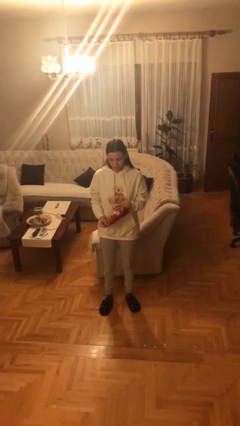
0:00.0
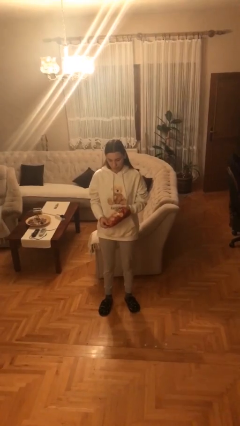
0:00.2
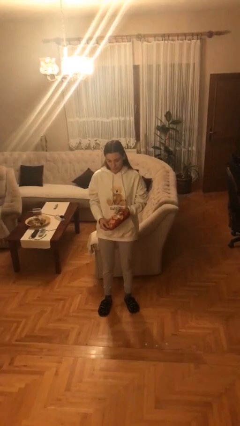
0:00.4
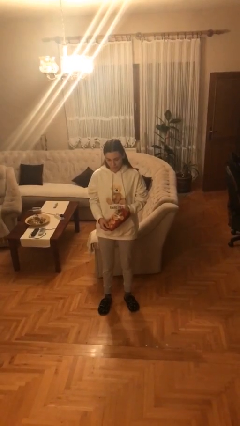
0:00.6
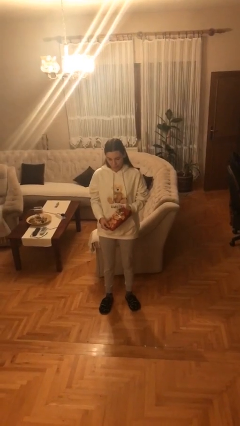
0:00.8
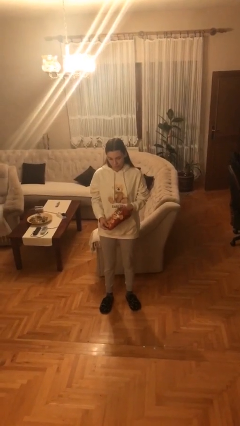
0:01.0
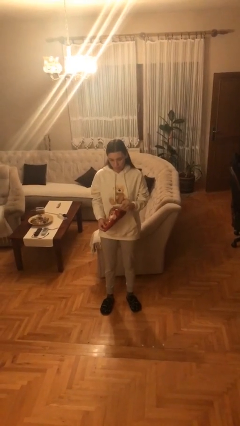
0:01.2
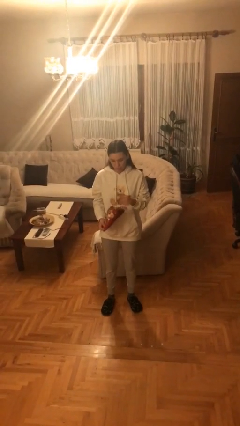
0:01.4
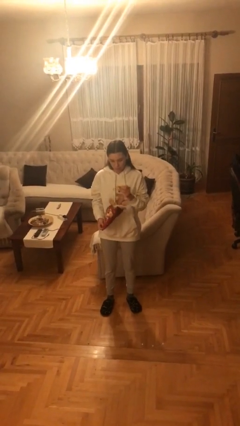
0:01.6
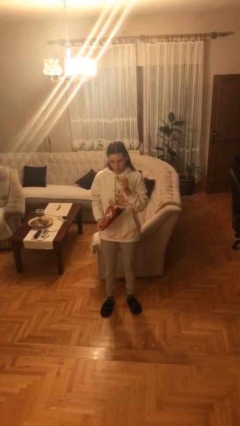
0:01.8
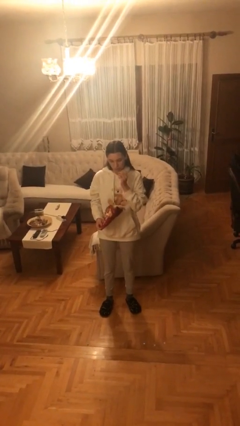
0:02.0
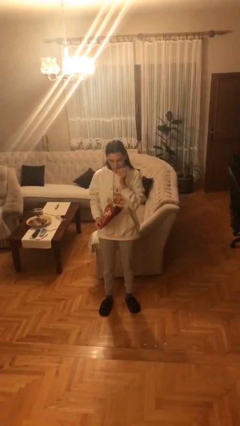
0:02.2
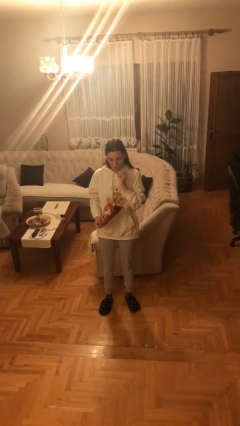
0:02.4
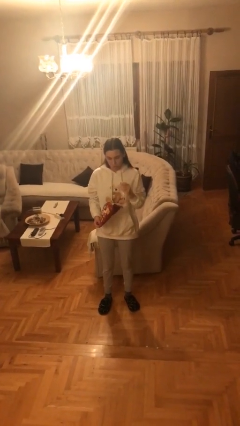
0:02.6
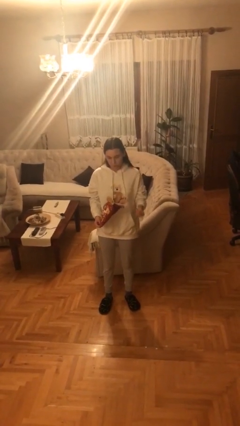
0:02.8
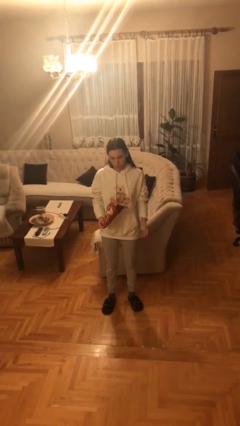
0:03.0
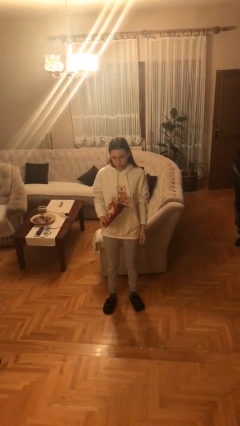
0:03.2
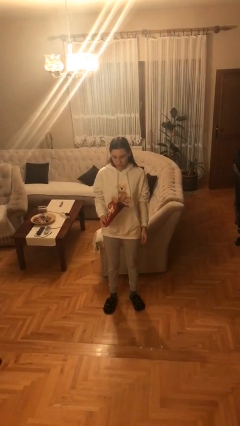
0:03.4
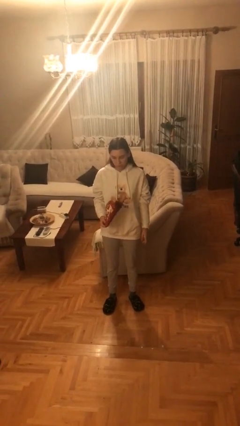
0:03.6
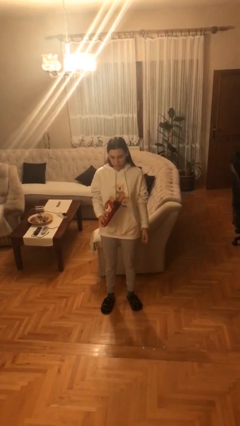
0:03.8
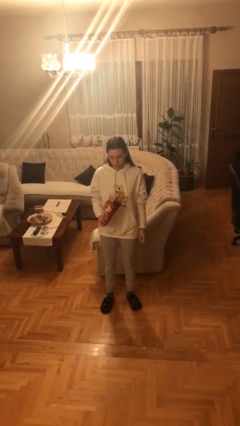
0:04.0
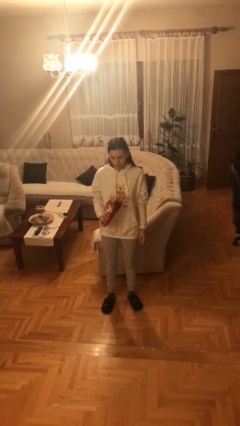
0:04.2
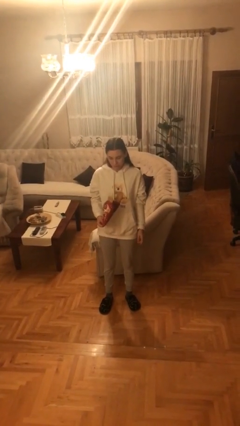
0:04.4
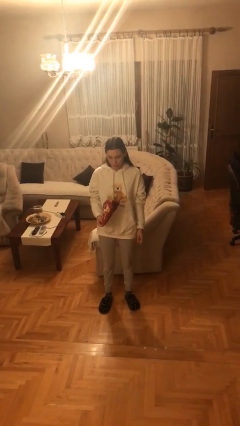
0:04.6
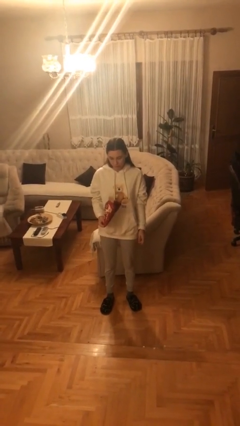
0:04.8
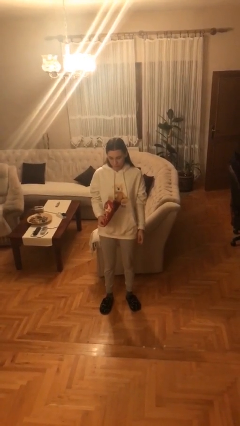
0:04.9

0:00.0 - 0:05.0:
person eats snack from bag

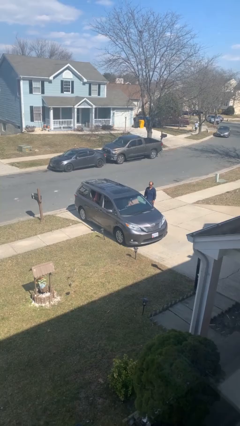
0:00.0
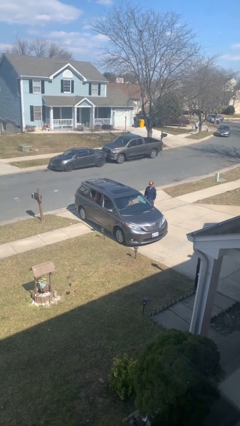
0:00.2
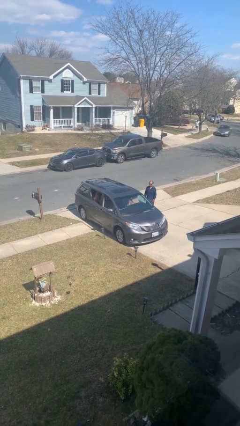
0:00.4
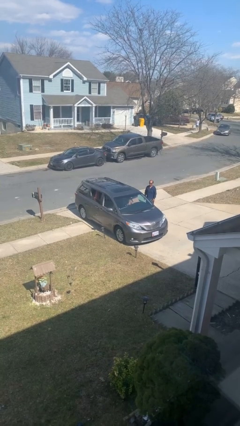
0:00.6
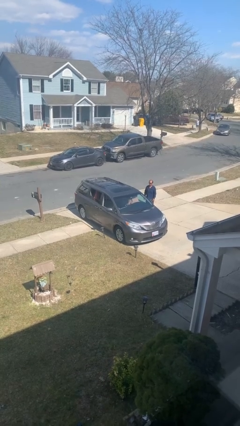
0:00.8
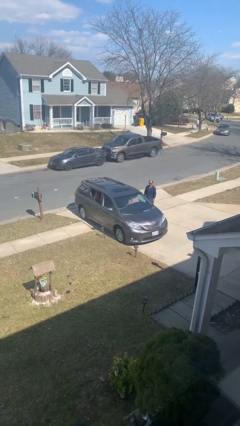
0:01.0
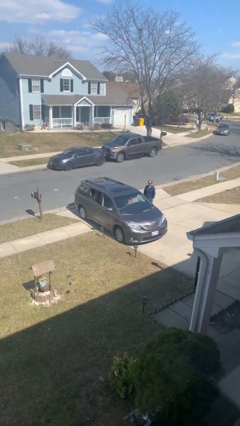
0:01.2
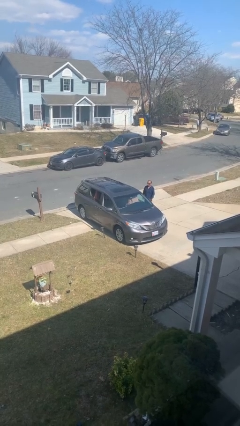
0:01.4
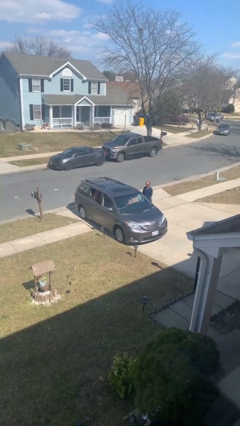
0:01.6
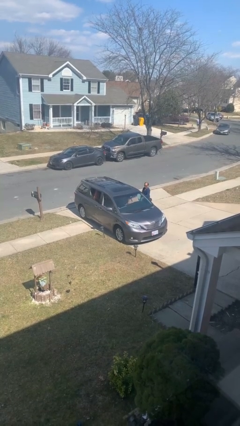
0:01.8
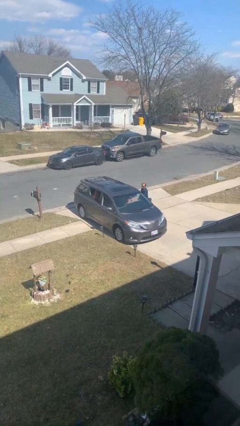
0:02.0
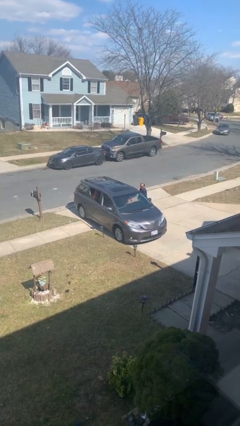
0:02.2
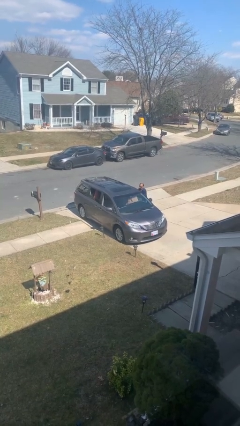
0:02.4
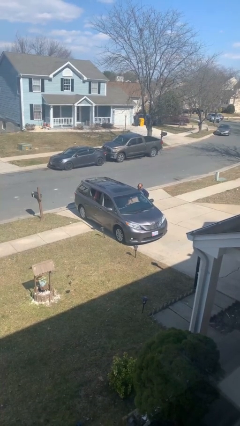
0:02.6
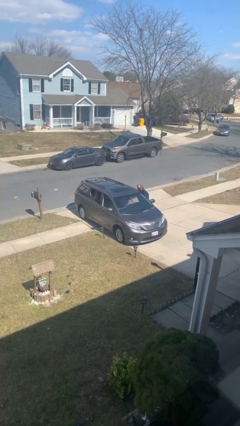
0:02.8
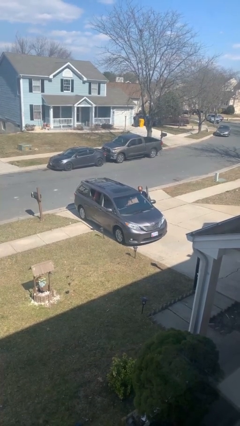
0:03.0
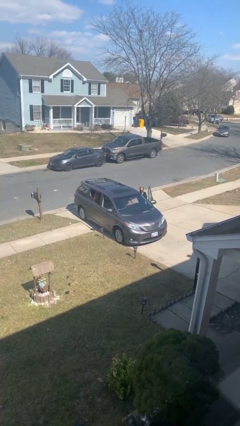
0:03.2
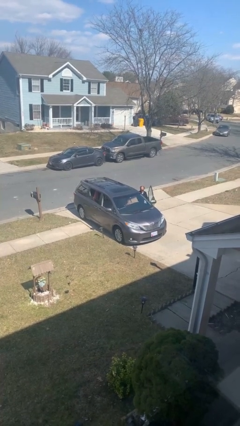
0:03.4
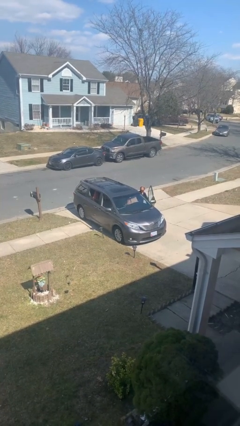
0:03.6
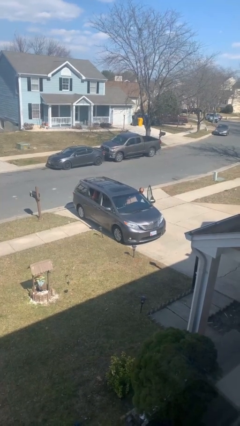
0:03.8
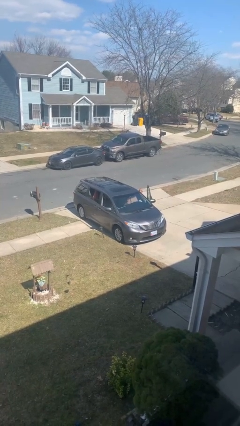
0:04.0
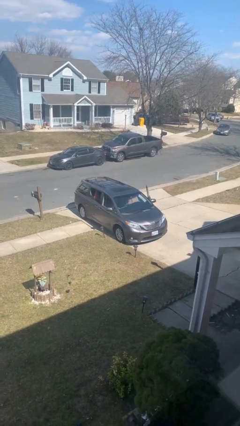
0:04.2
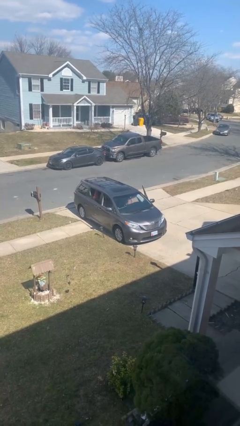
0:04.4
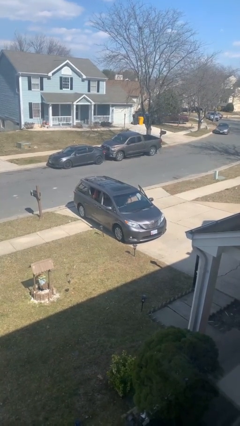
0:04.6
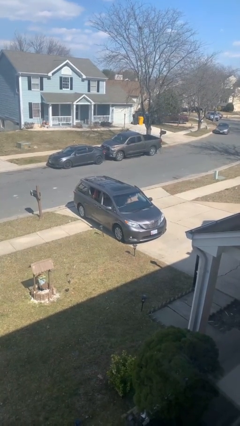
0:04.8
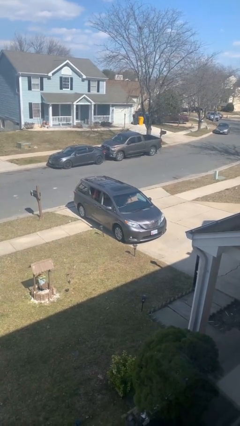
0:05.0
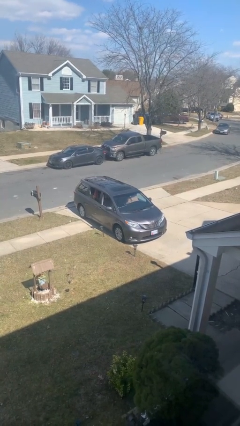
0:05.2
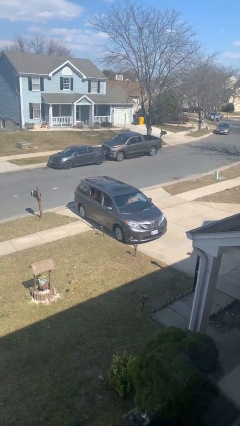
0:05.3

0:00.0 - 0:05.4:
car picks up person

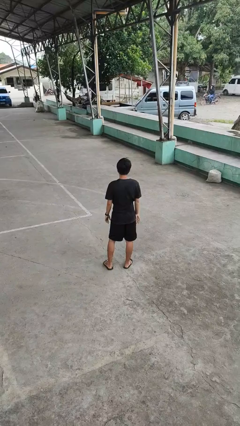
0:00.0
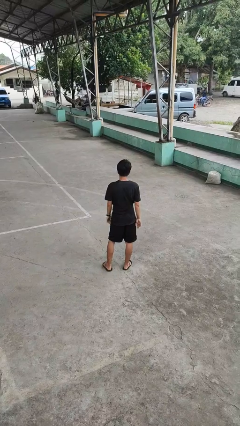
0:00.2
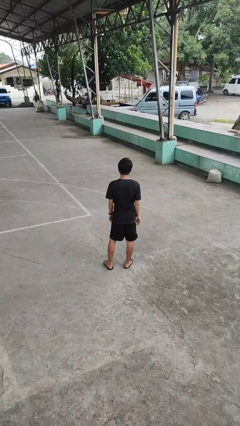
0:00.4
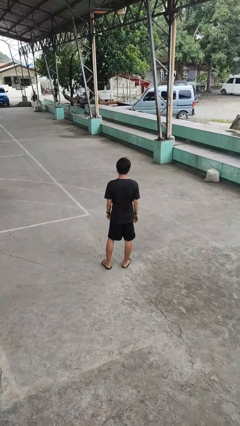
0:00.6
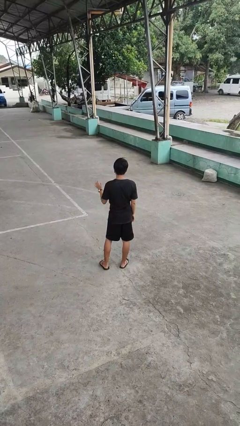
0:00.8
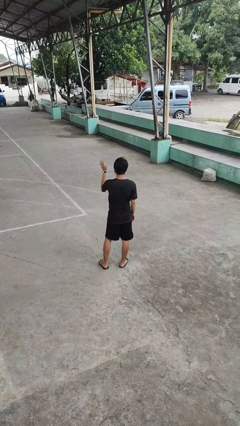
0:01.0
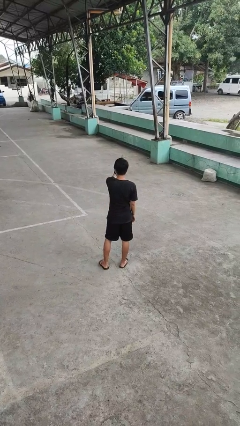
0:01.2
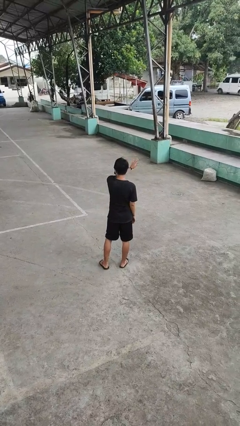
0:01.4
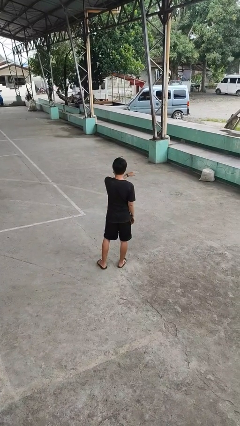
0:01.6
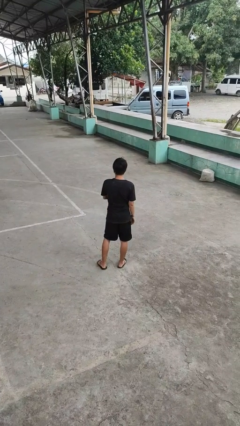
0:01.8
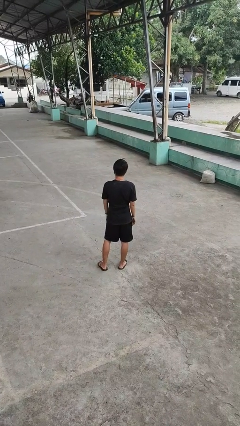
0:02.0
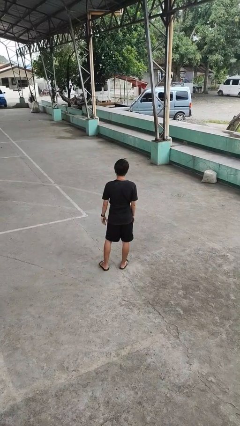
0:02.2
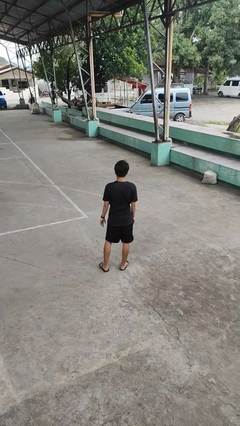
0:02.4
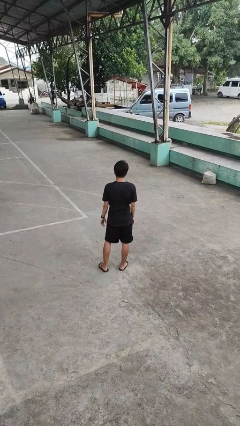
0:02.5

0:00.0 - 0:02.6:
person gestures swipe right

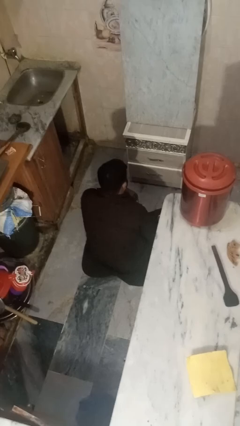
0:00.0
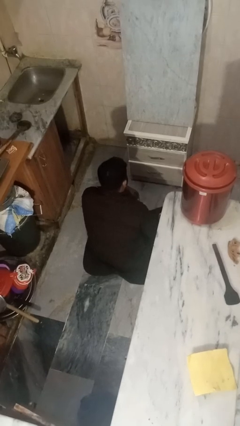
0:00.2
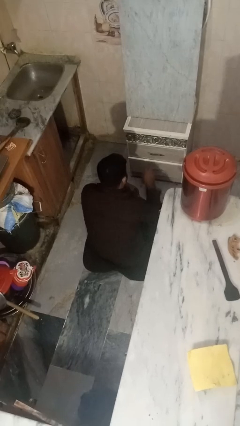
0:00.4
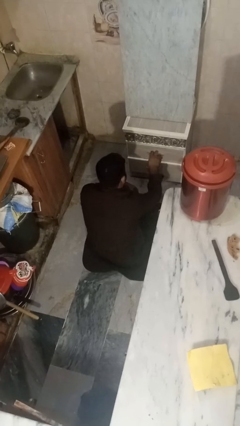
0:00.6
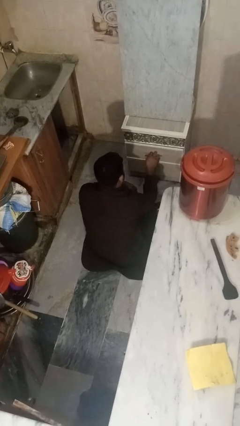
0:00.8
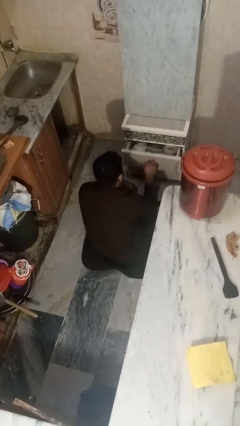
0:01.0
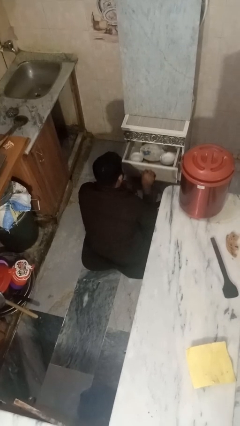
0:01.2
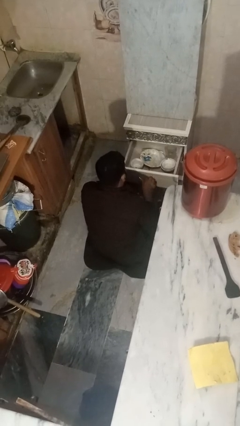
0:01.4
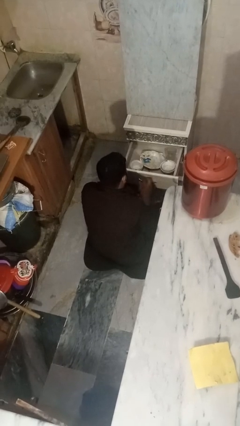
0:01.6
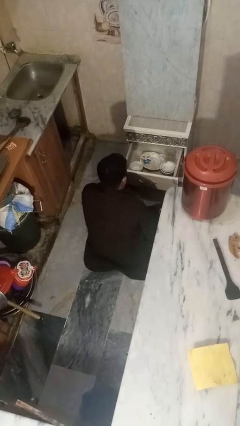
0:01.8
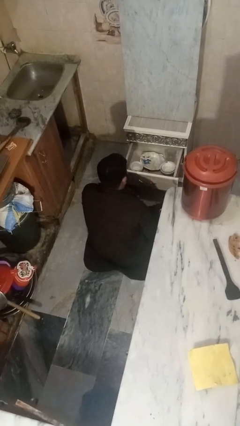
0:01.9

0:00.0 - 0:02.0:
person opens kitchen drawer

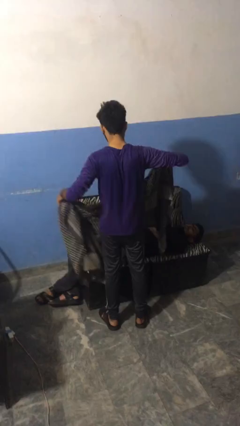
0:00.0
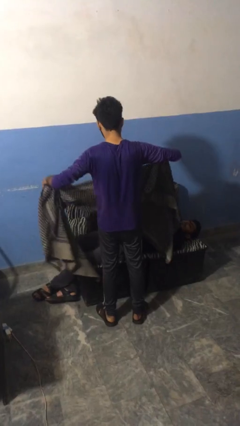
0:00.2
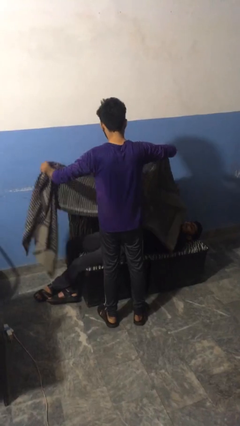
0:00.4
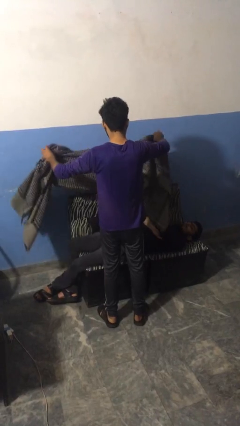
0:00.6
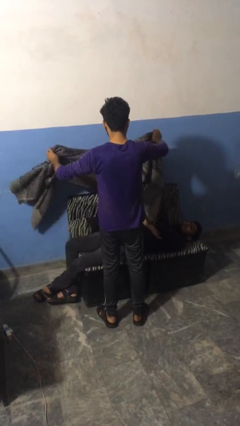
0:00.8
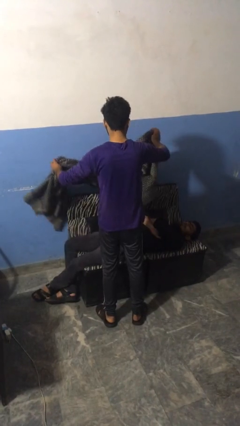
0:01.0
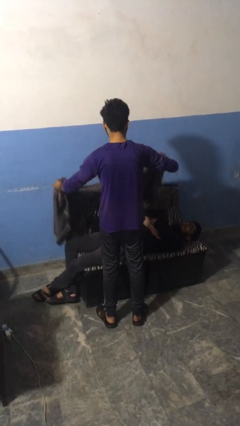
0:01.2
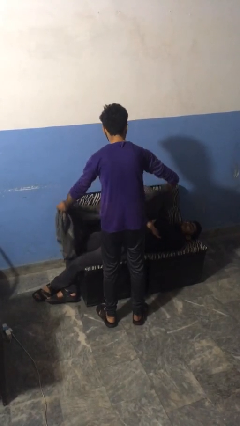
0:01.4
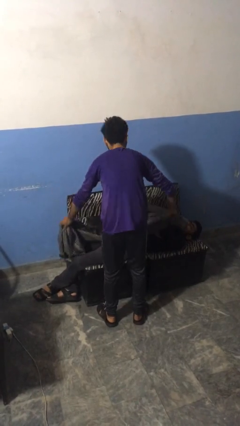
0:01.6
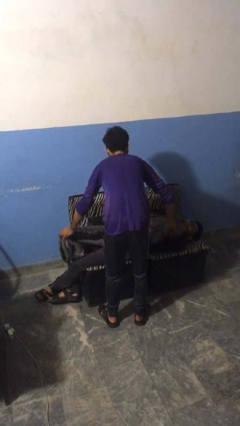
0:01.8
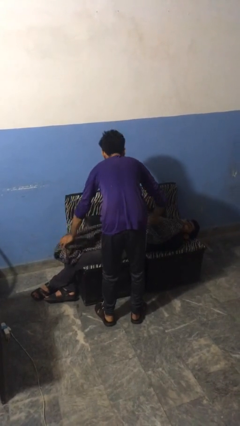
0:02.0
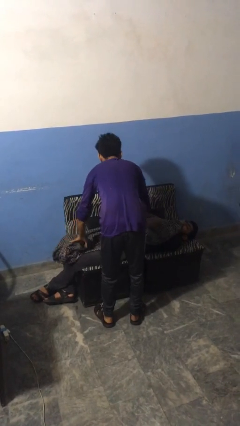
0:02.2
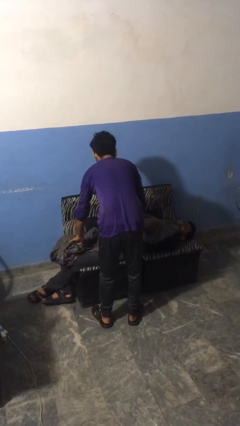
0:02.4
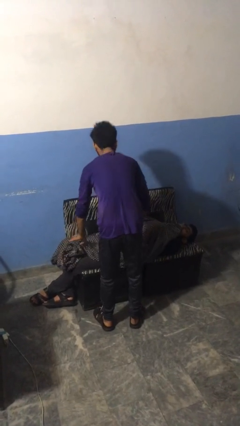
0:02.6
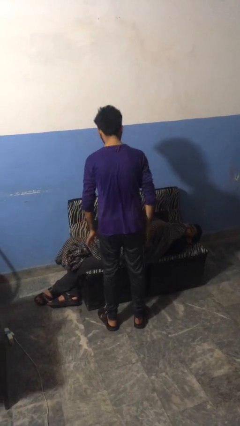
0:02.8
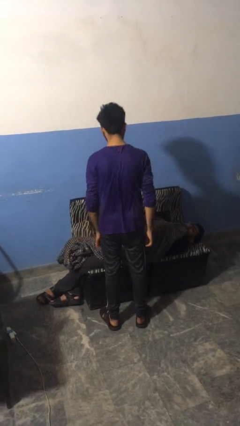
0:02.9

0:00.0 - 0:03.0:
person covers friend with blanket
